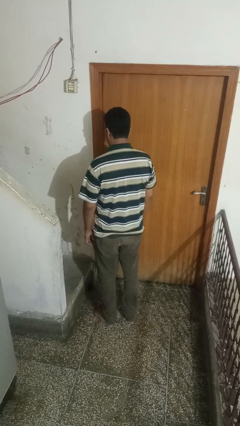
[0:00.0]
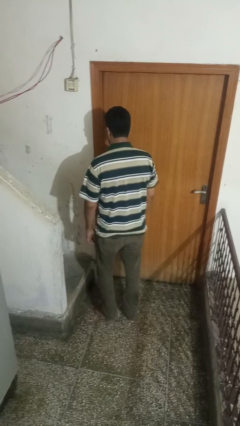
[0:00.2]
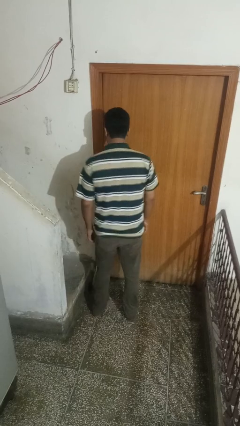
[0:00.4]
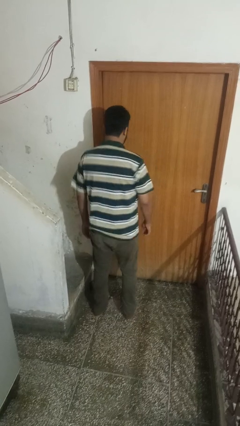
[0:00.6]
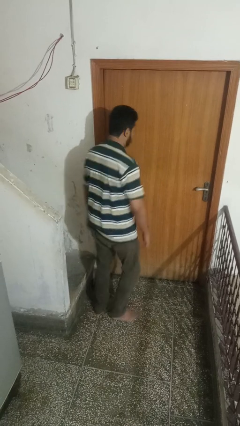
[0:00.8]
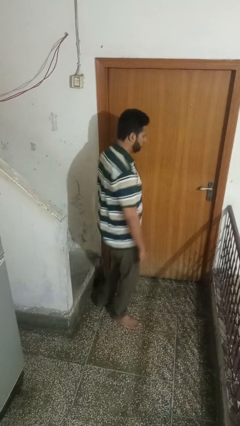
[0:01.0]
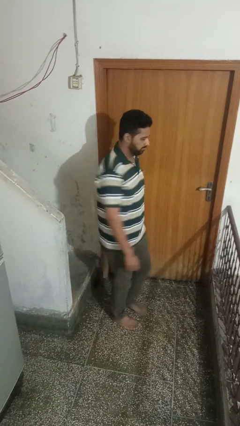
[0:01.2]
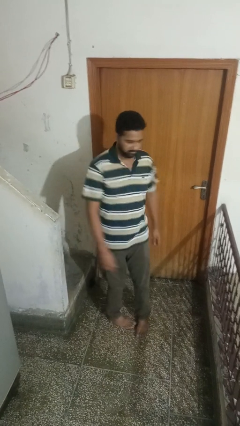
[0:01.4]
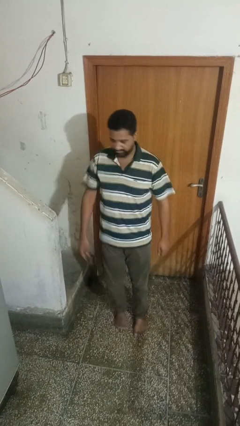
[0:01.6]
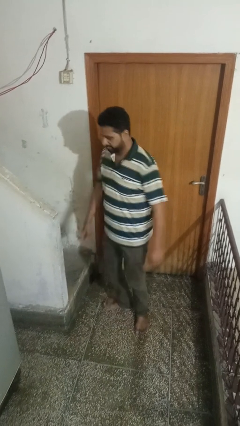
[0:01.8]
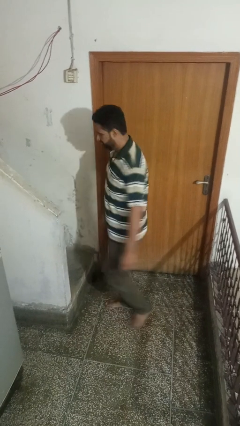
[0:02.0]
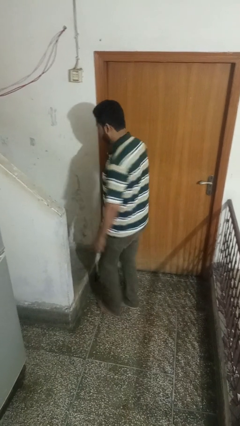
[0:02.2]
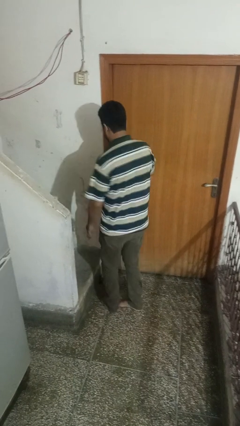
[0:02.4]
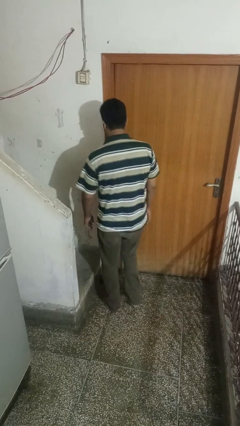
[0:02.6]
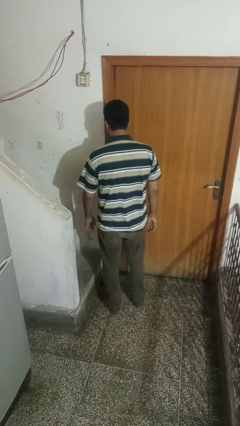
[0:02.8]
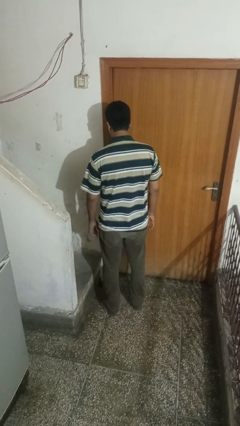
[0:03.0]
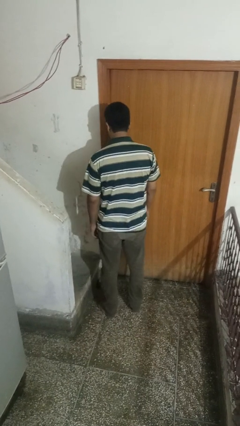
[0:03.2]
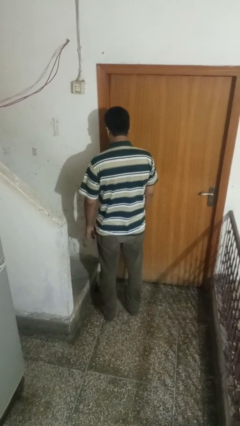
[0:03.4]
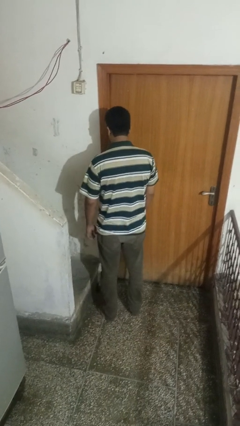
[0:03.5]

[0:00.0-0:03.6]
person twirls

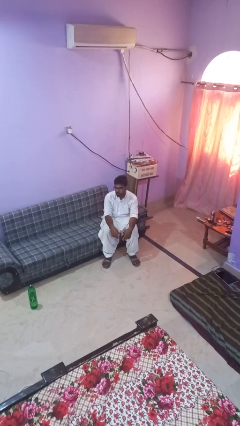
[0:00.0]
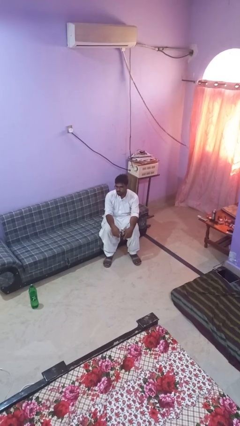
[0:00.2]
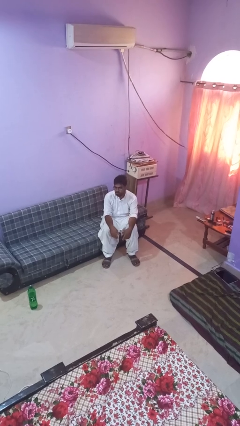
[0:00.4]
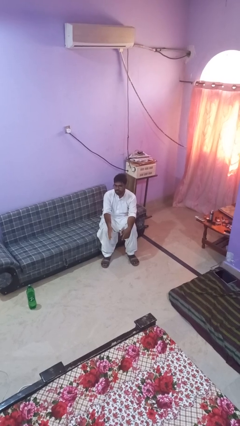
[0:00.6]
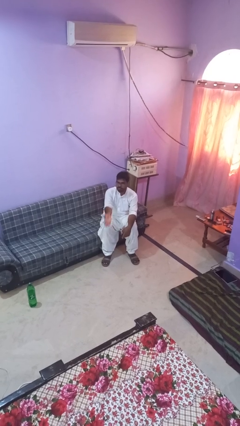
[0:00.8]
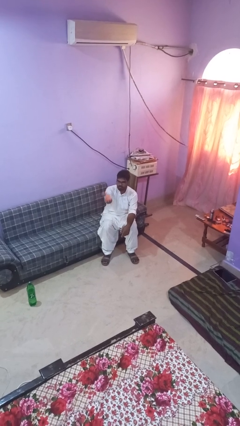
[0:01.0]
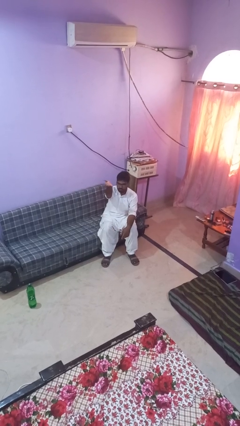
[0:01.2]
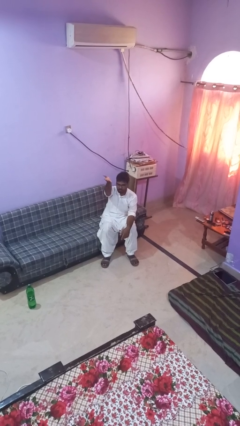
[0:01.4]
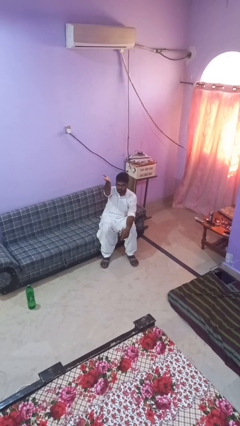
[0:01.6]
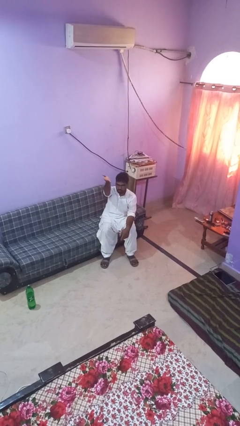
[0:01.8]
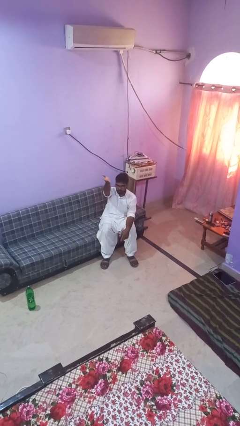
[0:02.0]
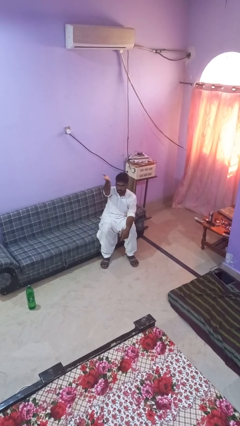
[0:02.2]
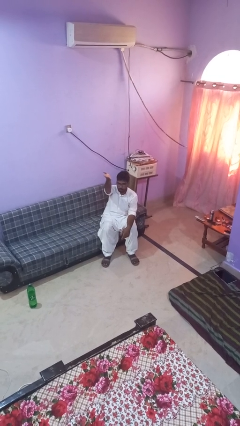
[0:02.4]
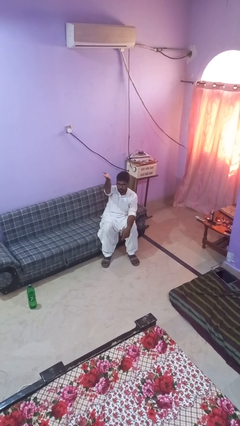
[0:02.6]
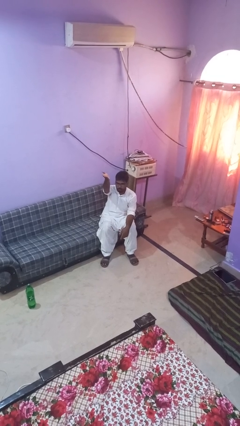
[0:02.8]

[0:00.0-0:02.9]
person gestures swipe up

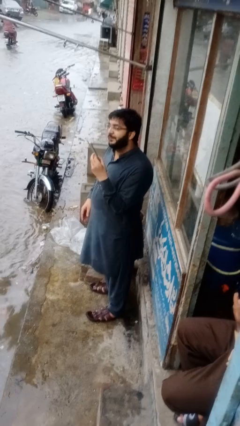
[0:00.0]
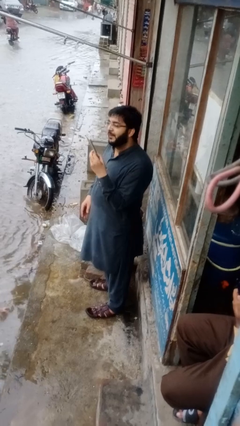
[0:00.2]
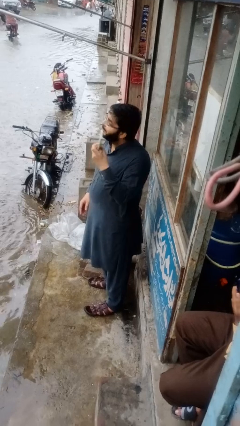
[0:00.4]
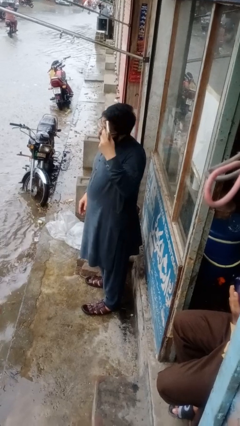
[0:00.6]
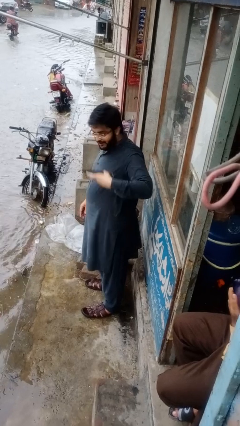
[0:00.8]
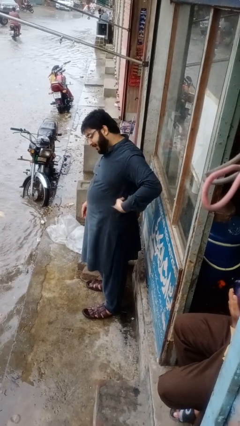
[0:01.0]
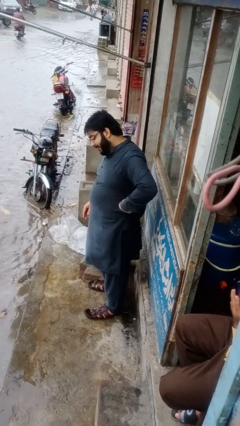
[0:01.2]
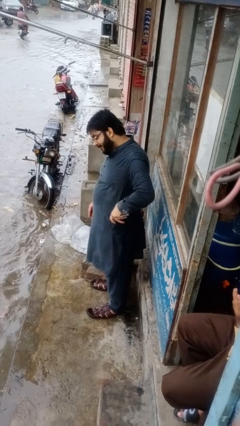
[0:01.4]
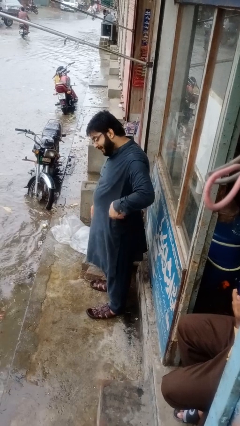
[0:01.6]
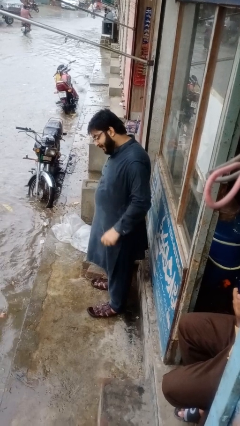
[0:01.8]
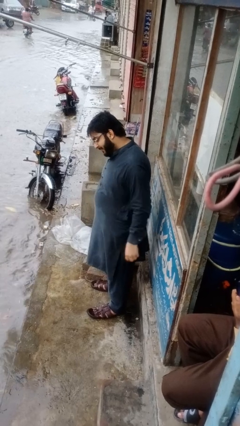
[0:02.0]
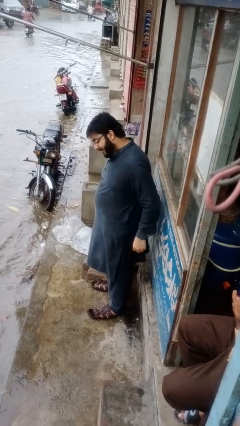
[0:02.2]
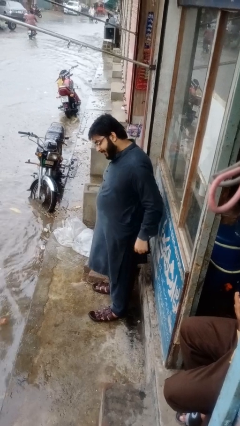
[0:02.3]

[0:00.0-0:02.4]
person puts phone into pocket

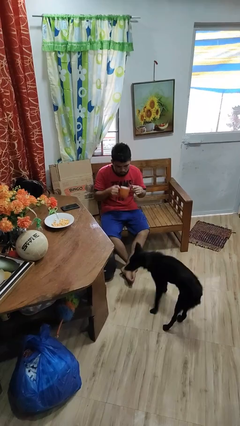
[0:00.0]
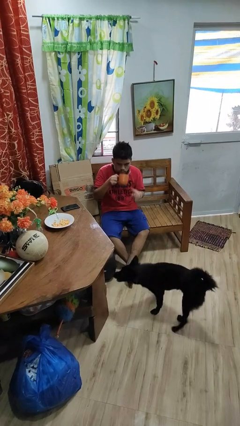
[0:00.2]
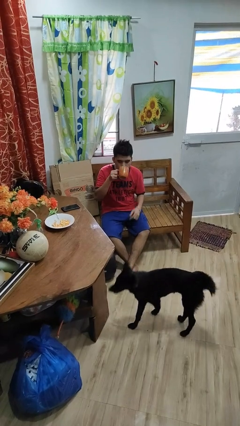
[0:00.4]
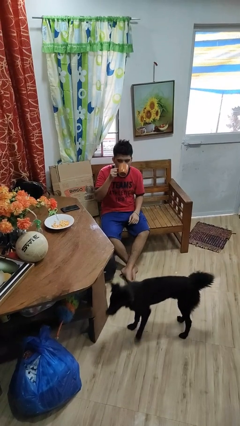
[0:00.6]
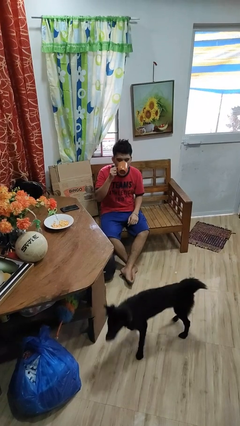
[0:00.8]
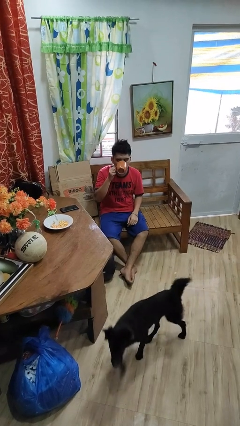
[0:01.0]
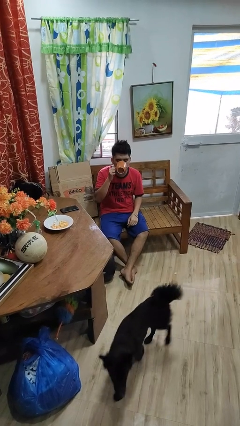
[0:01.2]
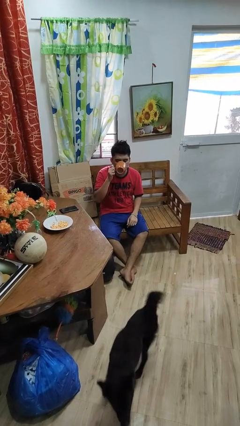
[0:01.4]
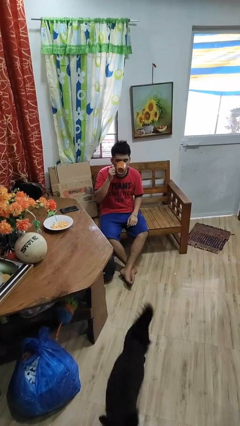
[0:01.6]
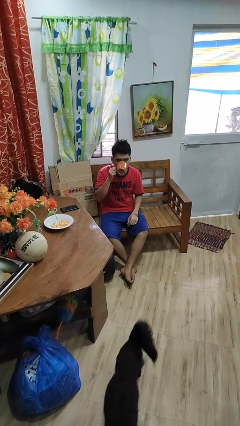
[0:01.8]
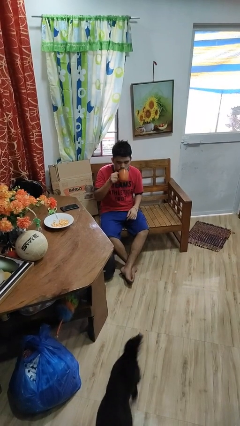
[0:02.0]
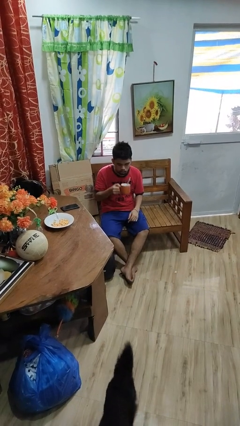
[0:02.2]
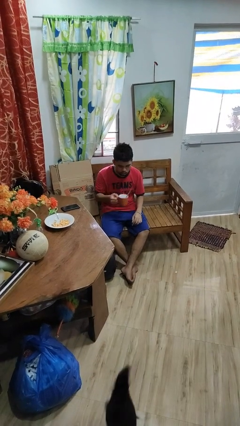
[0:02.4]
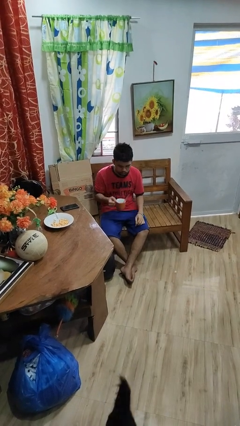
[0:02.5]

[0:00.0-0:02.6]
person drinks from mug

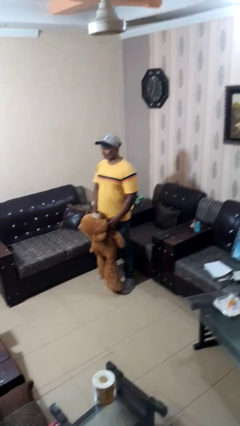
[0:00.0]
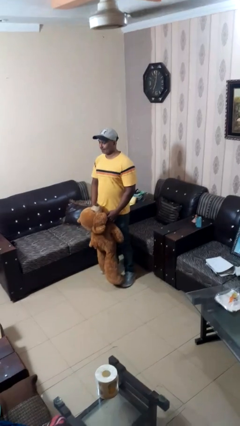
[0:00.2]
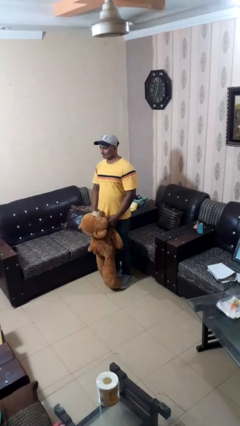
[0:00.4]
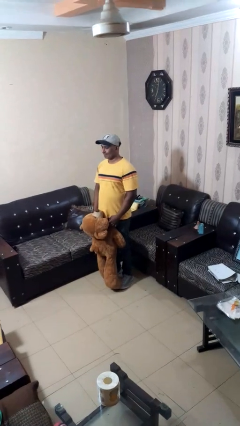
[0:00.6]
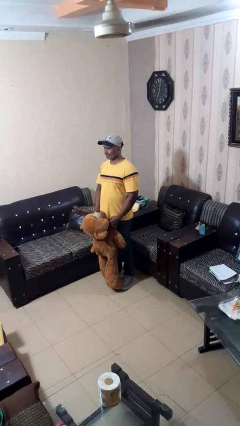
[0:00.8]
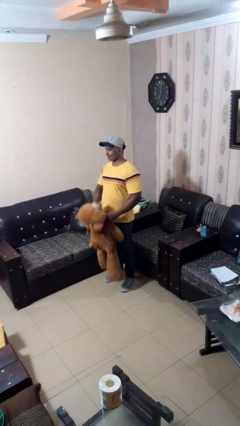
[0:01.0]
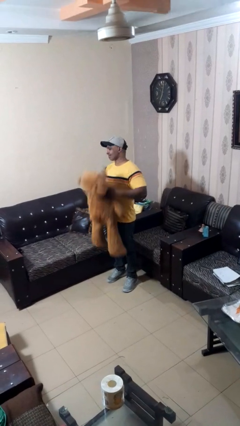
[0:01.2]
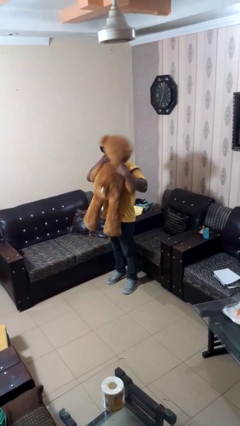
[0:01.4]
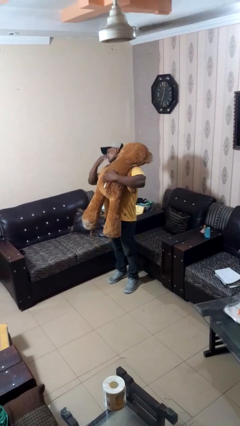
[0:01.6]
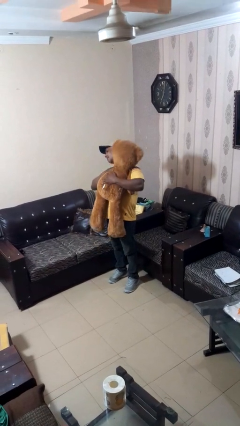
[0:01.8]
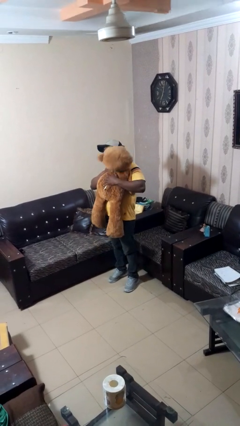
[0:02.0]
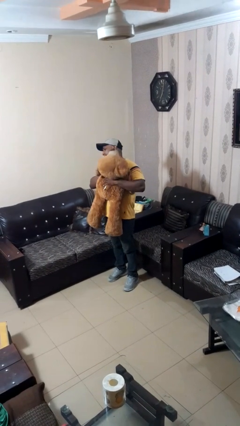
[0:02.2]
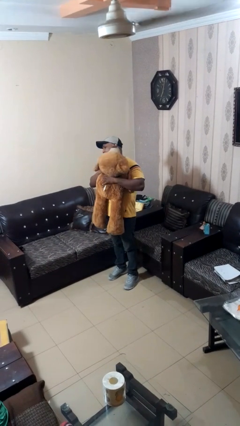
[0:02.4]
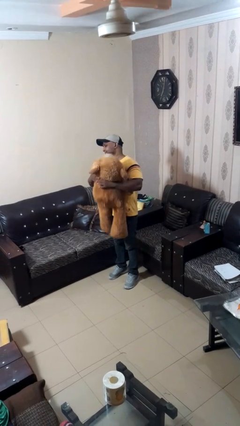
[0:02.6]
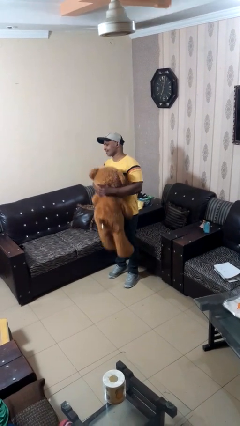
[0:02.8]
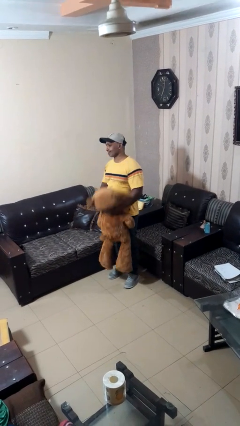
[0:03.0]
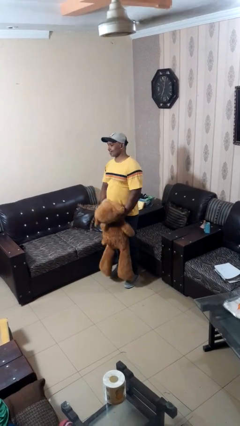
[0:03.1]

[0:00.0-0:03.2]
person hugs stuffed animal

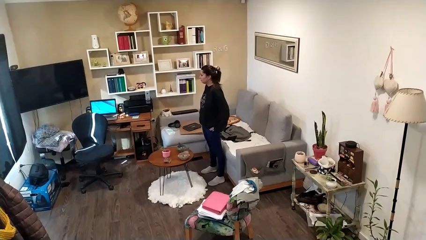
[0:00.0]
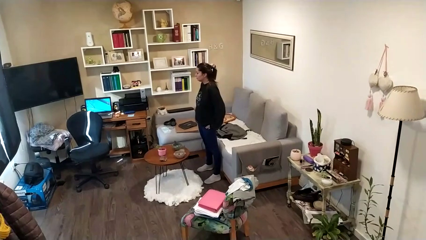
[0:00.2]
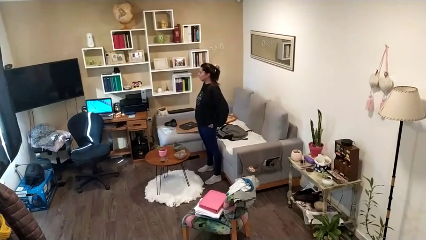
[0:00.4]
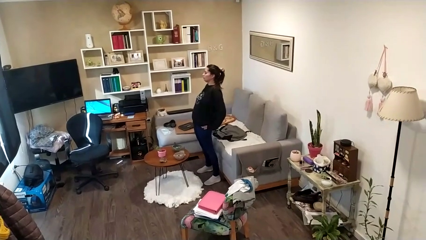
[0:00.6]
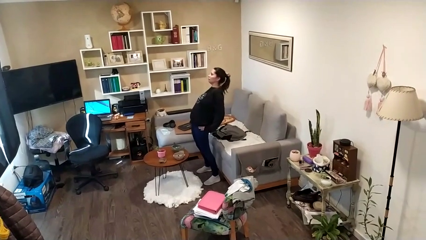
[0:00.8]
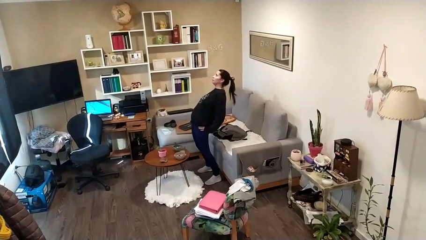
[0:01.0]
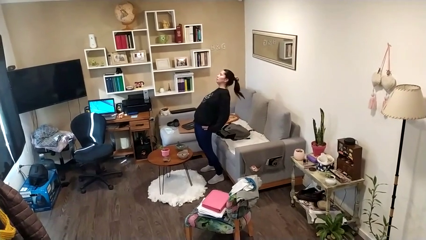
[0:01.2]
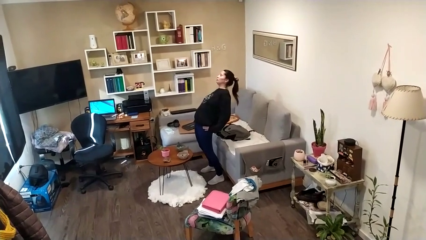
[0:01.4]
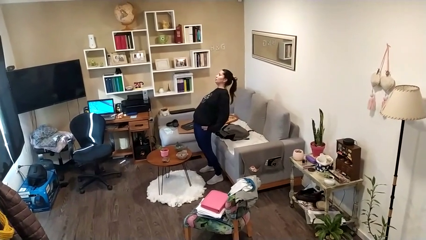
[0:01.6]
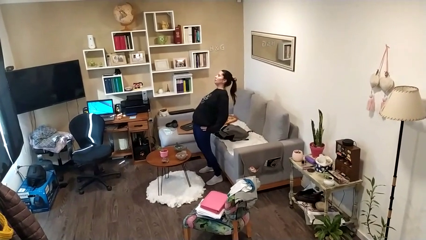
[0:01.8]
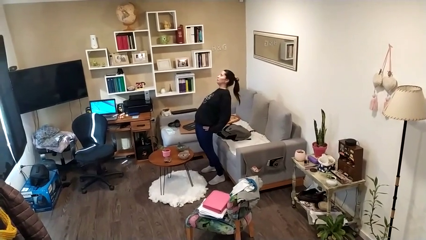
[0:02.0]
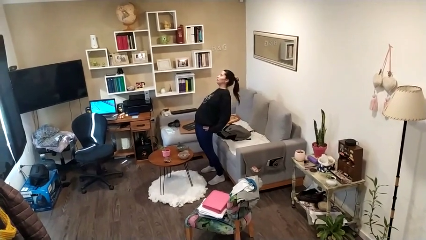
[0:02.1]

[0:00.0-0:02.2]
person stretches back

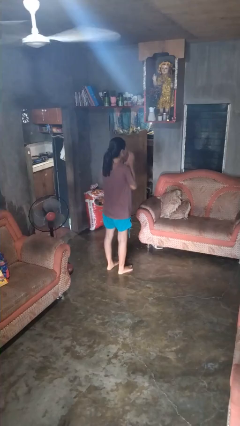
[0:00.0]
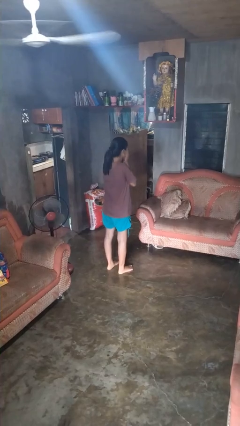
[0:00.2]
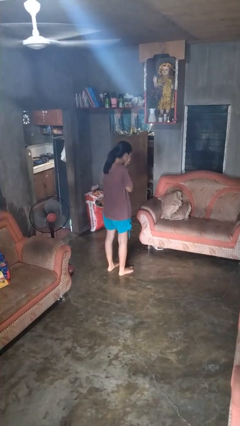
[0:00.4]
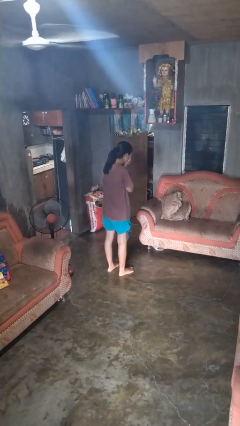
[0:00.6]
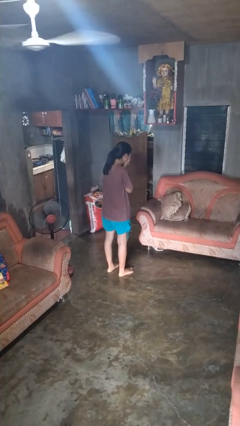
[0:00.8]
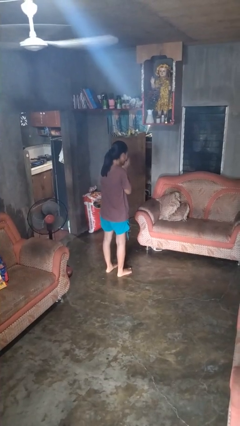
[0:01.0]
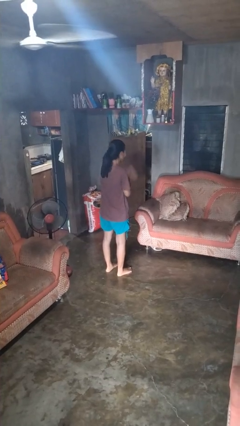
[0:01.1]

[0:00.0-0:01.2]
person sneezes into hand
